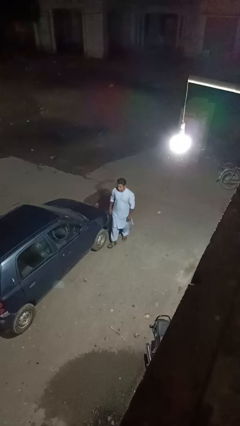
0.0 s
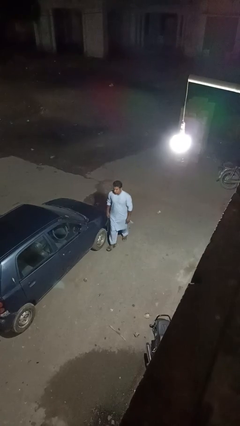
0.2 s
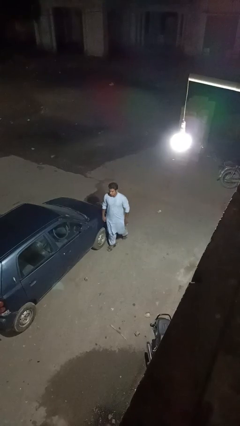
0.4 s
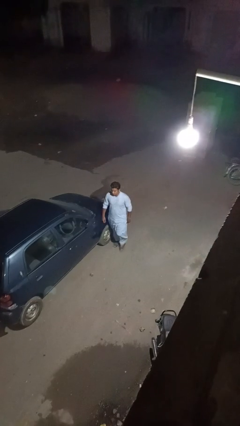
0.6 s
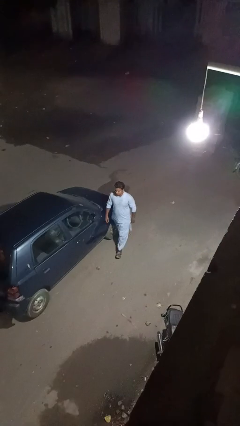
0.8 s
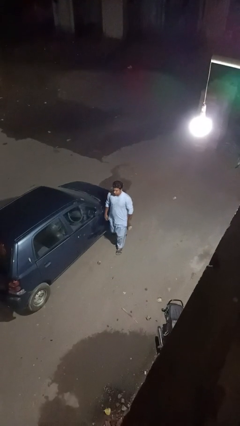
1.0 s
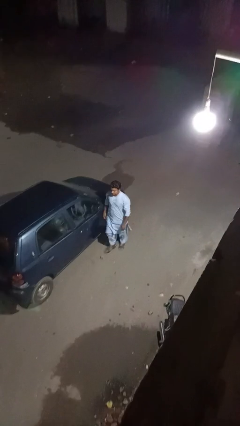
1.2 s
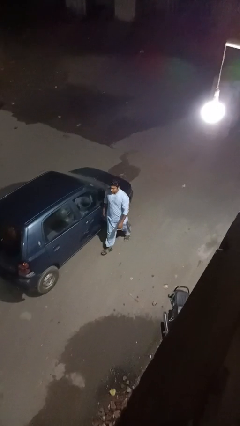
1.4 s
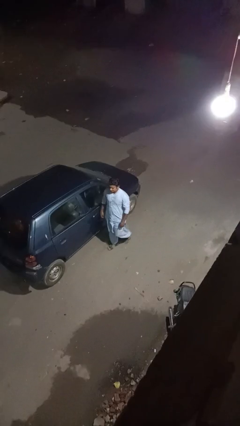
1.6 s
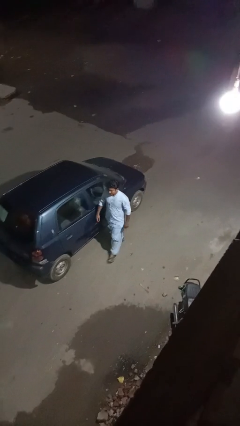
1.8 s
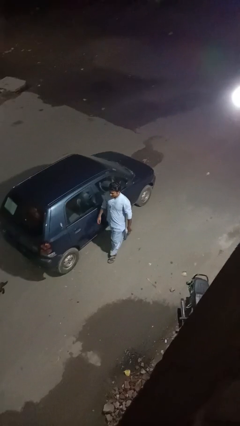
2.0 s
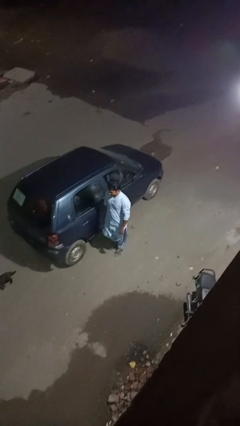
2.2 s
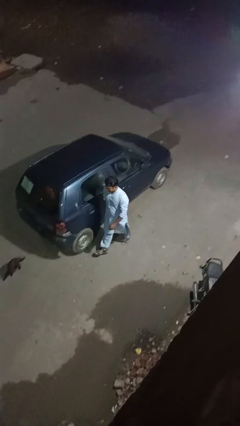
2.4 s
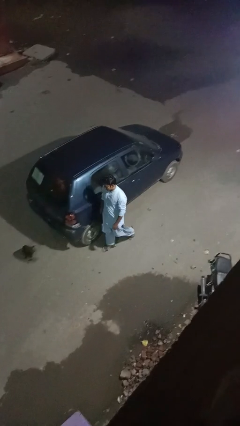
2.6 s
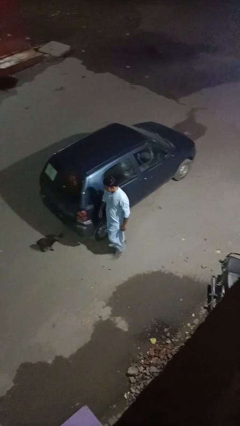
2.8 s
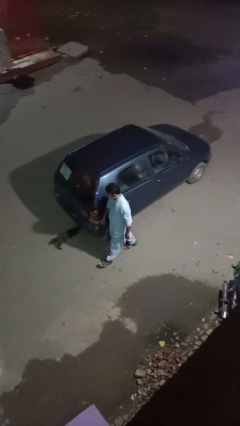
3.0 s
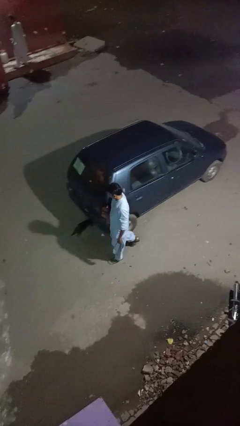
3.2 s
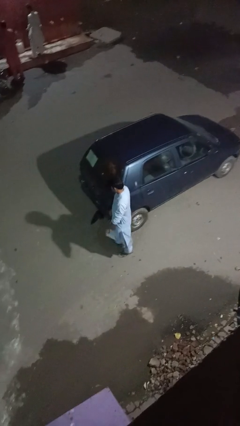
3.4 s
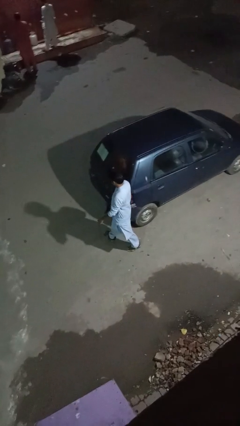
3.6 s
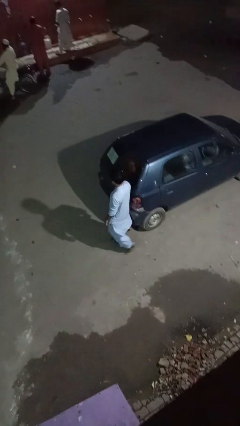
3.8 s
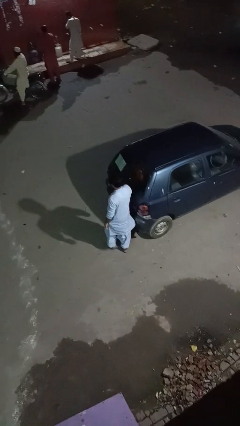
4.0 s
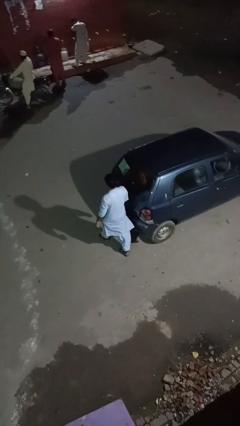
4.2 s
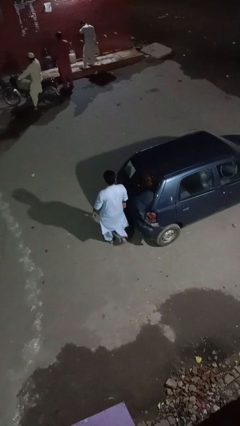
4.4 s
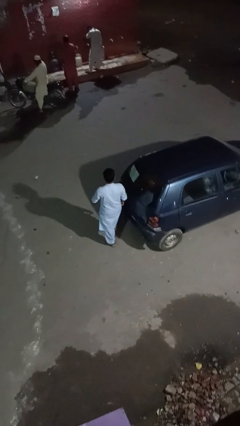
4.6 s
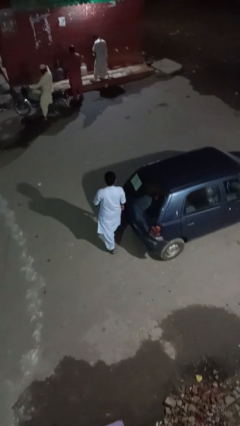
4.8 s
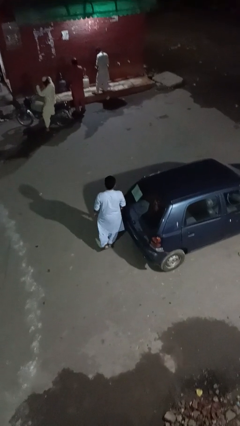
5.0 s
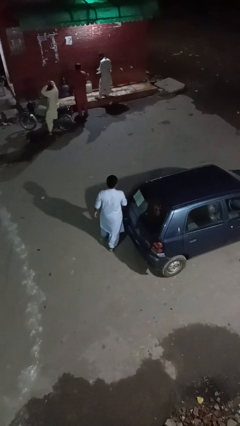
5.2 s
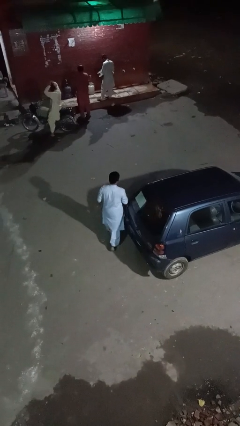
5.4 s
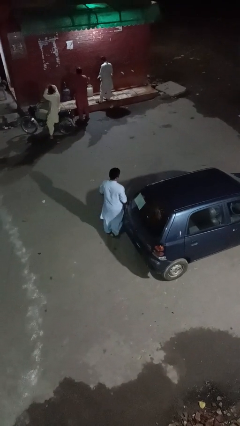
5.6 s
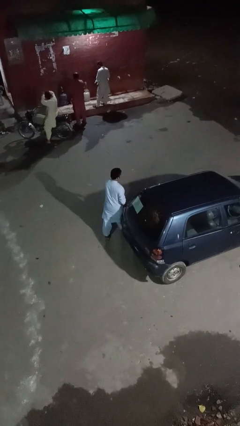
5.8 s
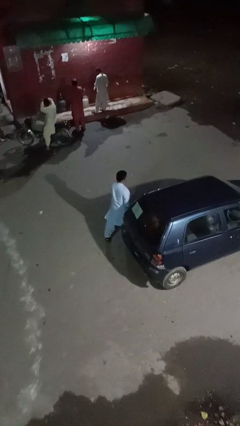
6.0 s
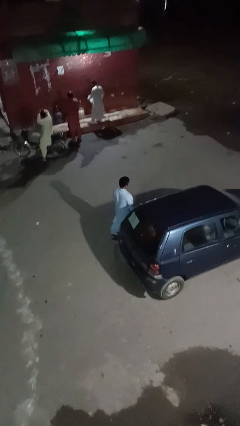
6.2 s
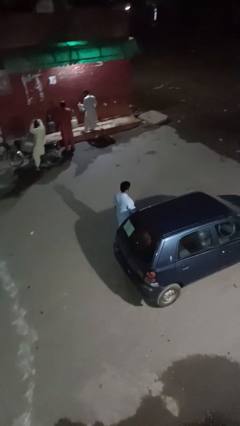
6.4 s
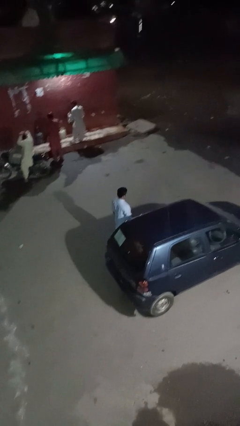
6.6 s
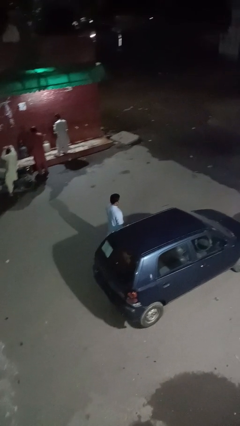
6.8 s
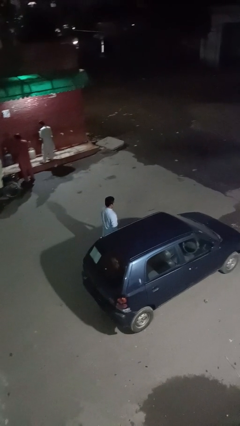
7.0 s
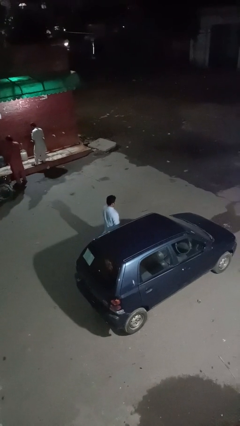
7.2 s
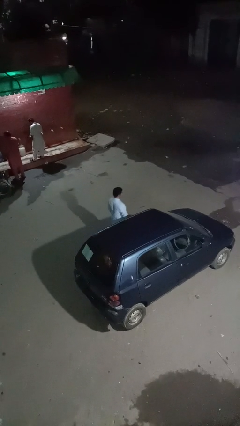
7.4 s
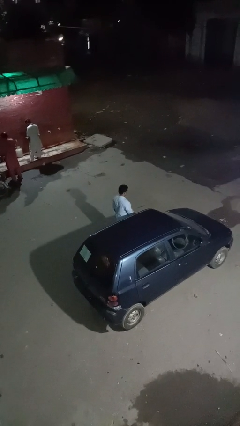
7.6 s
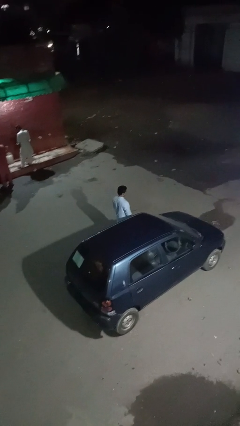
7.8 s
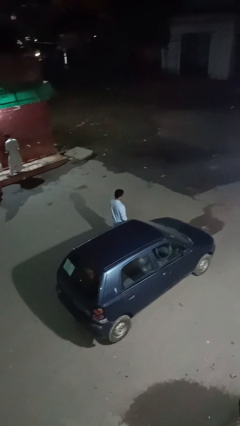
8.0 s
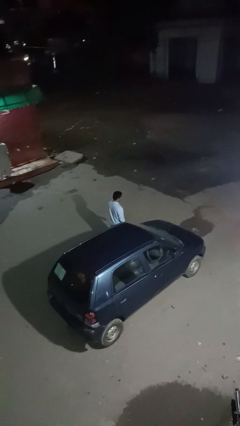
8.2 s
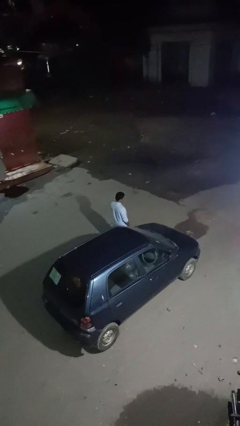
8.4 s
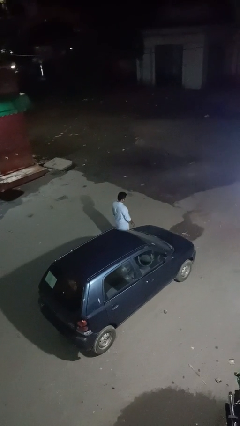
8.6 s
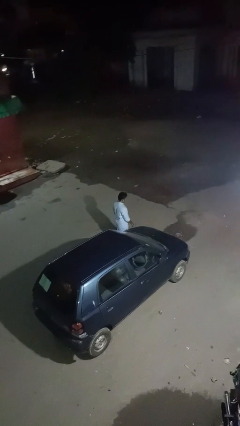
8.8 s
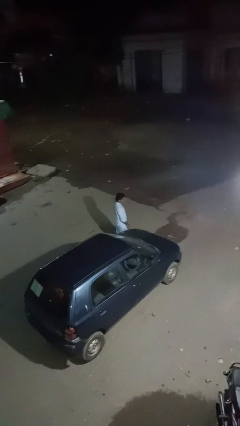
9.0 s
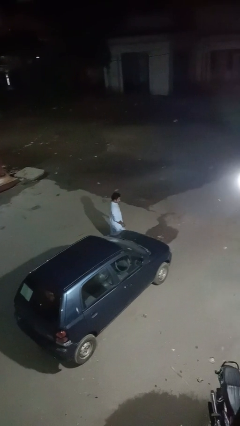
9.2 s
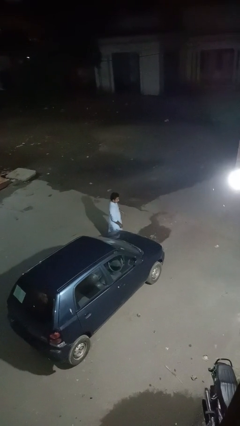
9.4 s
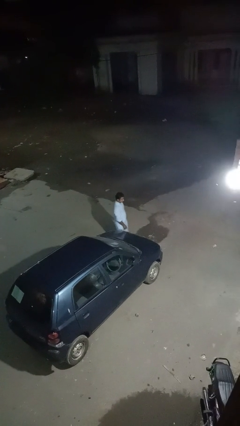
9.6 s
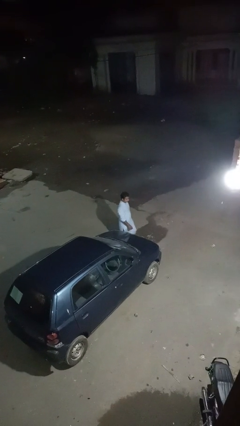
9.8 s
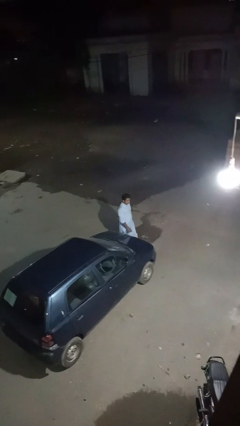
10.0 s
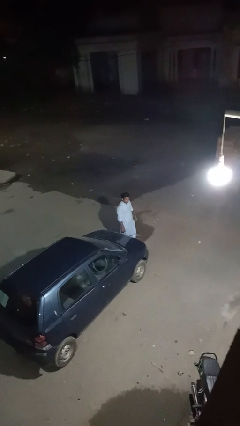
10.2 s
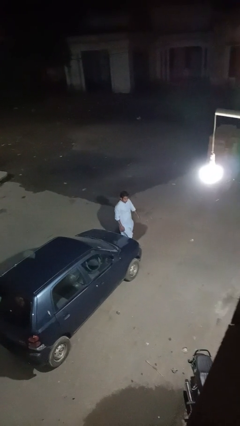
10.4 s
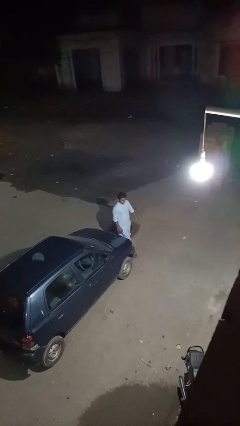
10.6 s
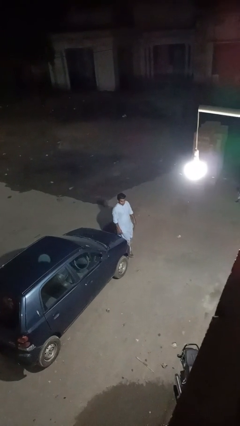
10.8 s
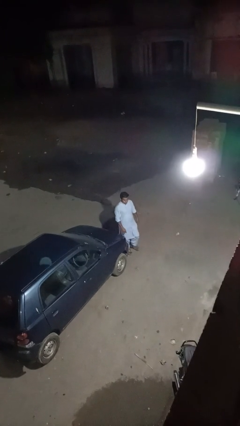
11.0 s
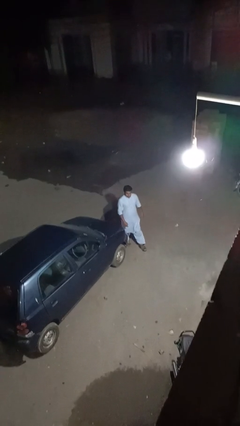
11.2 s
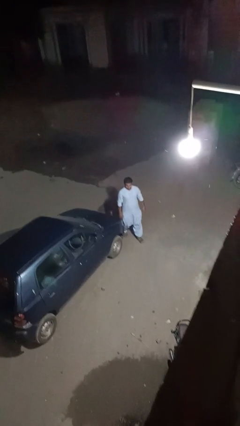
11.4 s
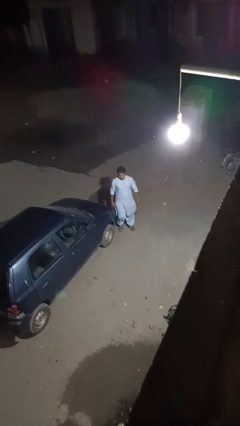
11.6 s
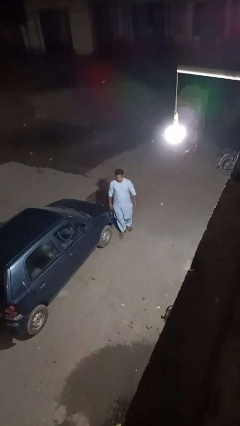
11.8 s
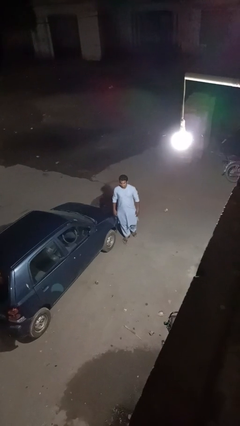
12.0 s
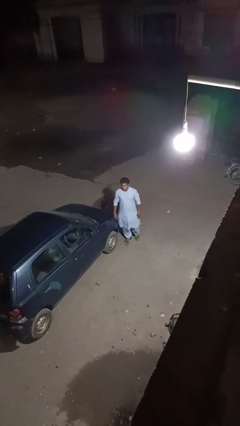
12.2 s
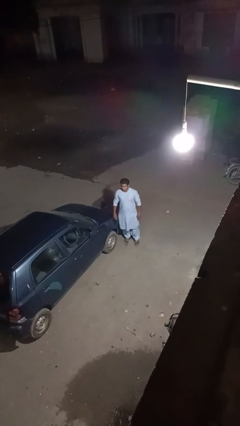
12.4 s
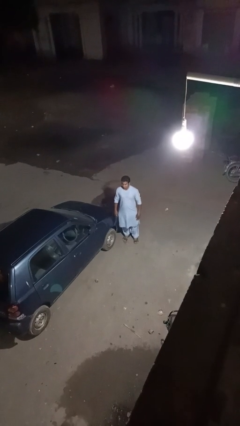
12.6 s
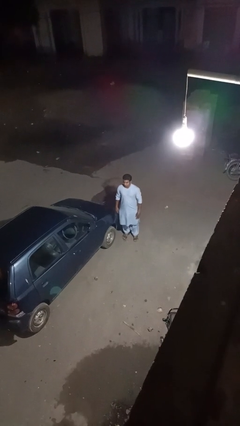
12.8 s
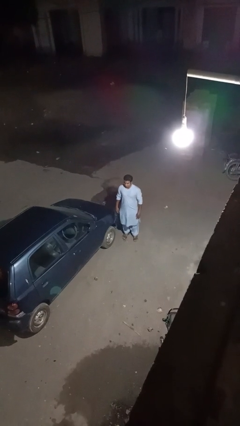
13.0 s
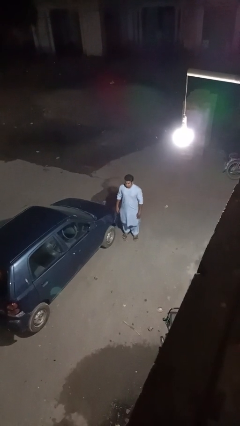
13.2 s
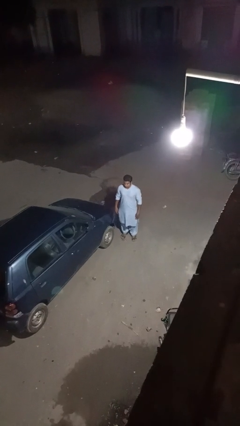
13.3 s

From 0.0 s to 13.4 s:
person walks around car

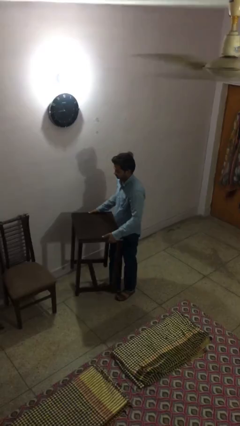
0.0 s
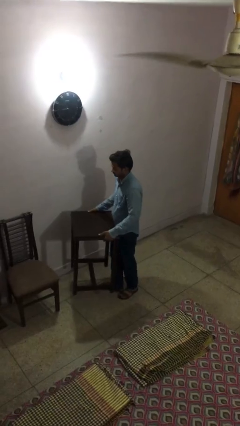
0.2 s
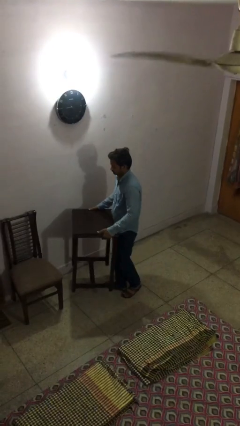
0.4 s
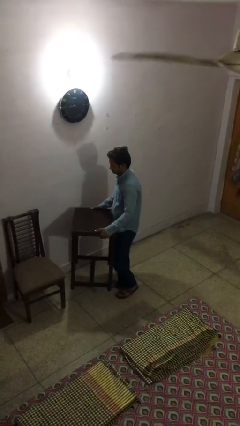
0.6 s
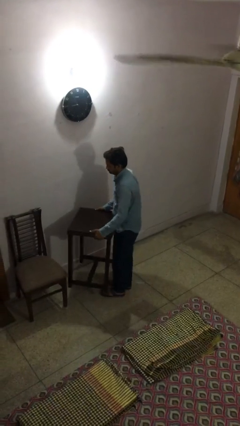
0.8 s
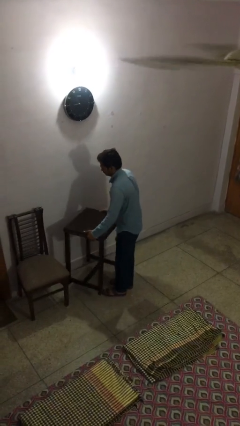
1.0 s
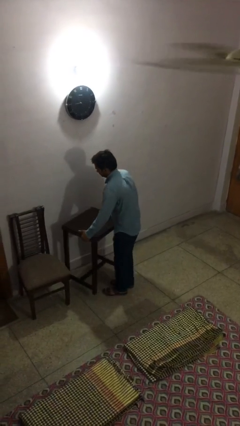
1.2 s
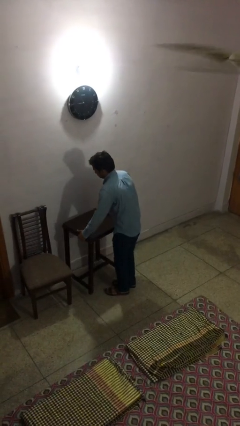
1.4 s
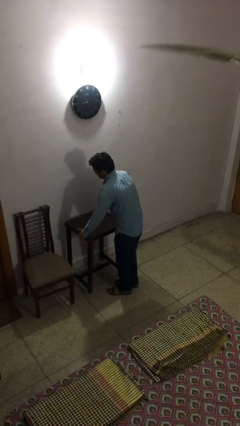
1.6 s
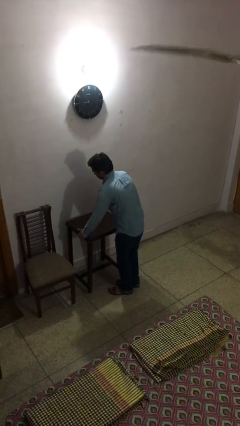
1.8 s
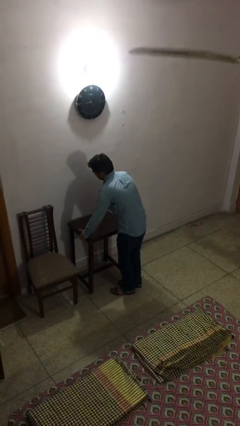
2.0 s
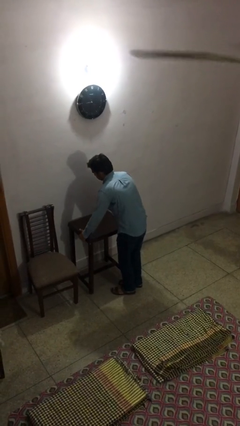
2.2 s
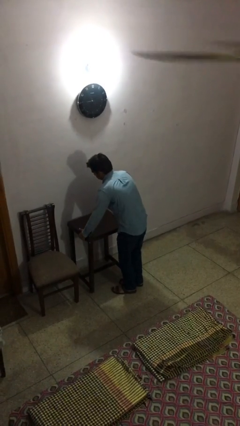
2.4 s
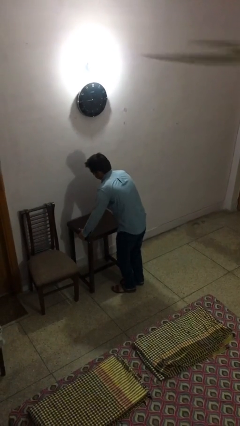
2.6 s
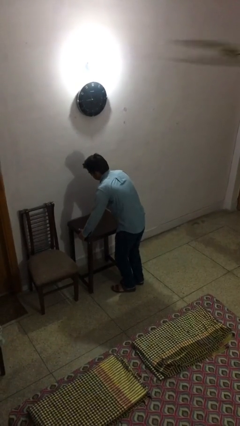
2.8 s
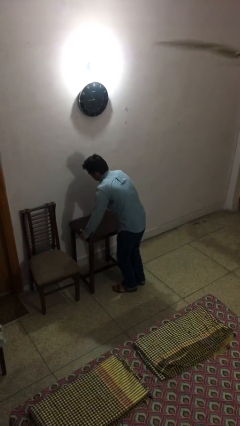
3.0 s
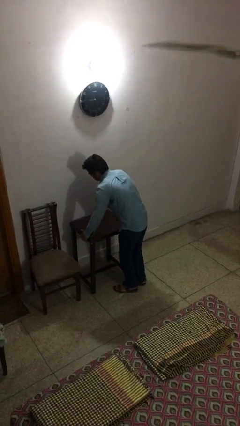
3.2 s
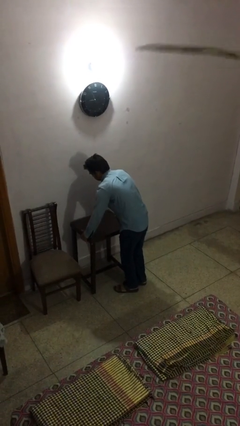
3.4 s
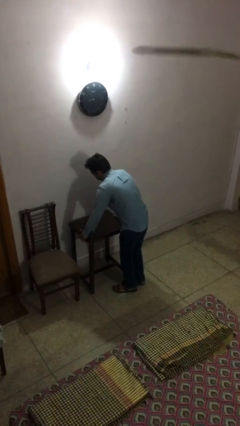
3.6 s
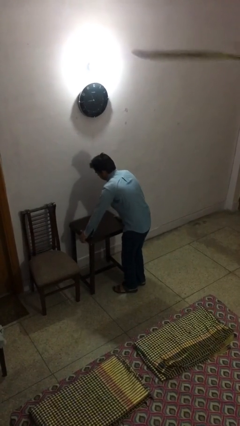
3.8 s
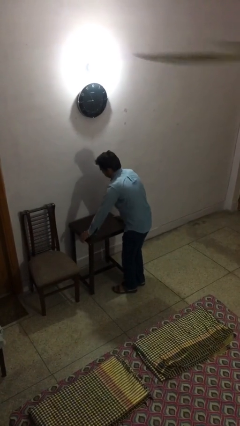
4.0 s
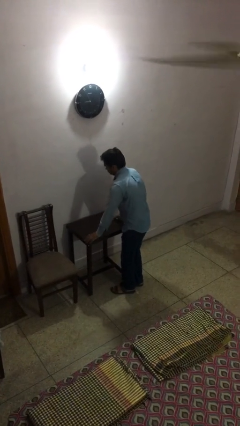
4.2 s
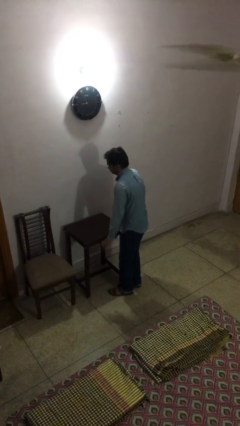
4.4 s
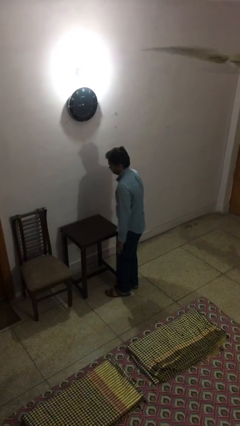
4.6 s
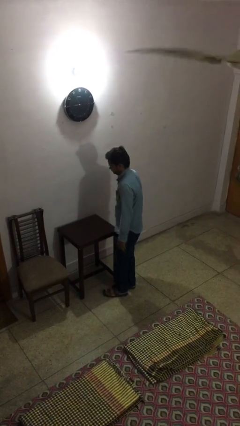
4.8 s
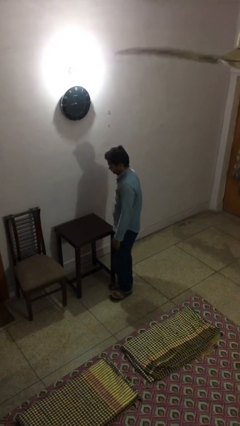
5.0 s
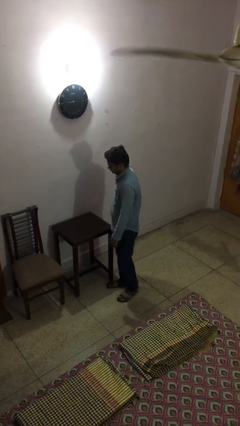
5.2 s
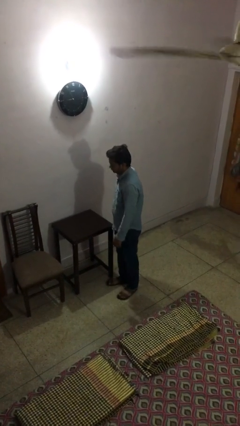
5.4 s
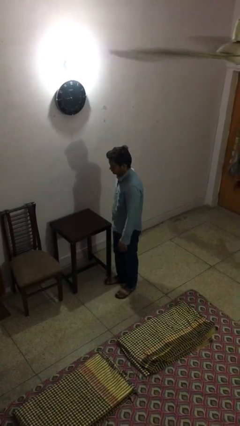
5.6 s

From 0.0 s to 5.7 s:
person puts down object on floor
